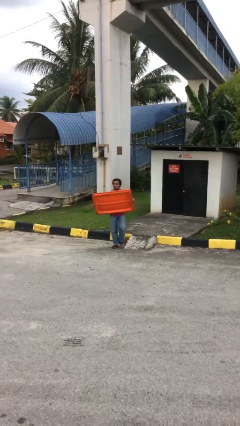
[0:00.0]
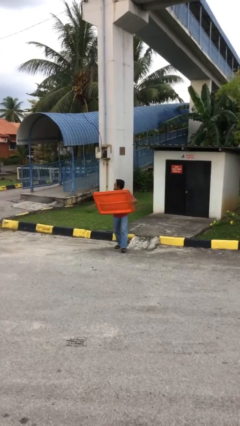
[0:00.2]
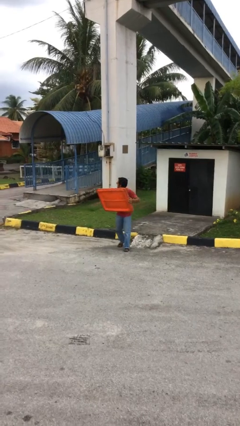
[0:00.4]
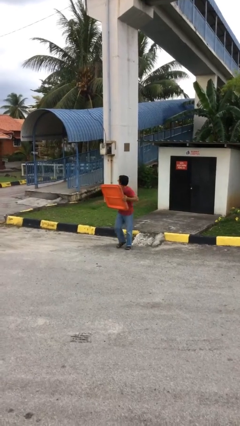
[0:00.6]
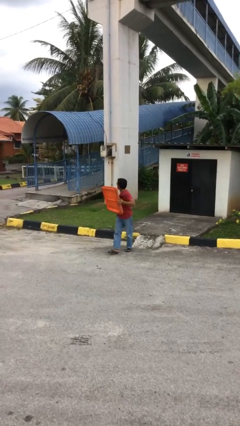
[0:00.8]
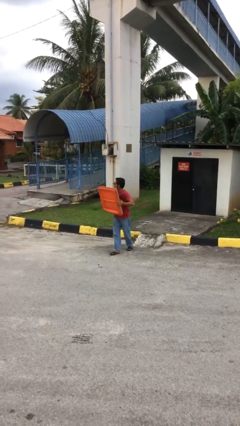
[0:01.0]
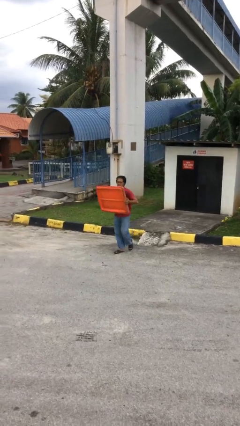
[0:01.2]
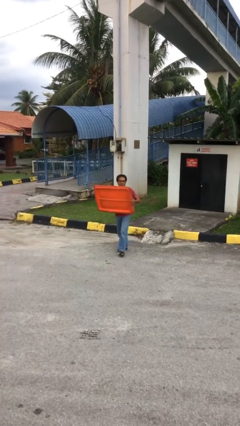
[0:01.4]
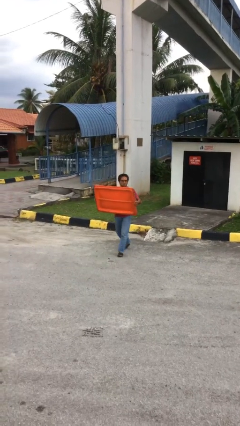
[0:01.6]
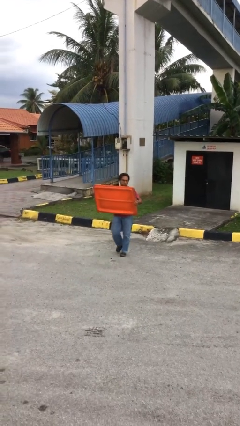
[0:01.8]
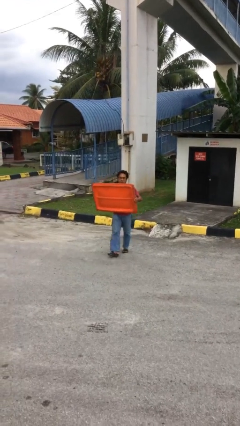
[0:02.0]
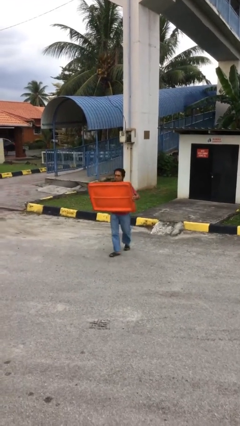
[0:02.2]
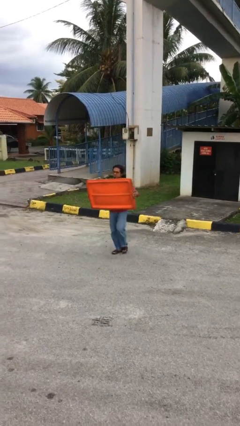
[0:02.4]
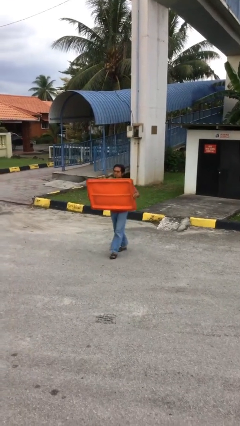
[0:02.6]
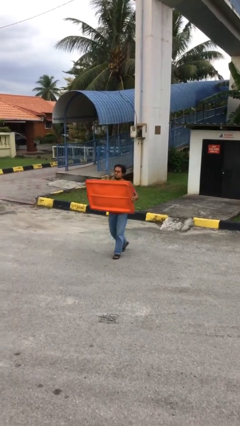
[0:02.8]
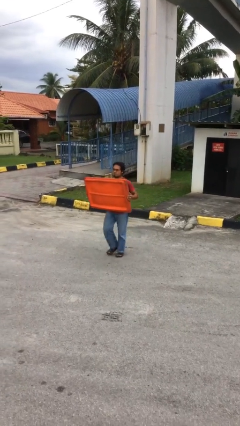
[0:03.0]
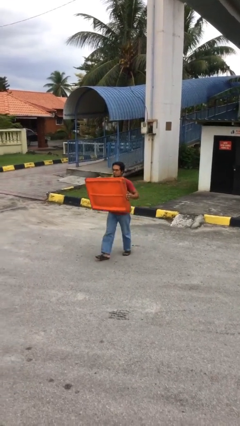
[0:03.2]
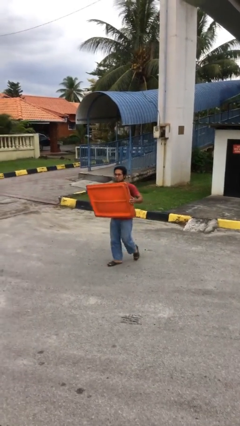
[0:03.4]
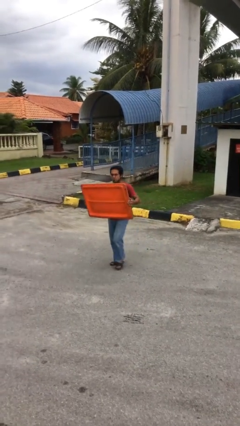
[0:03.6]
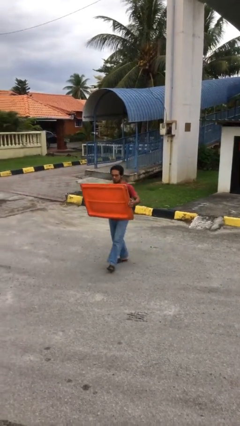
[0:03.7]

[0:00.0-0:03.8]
person carries heavy object

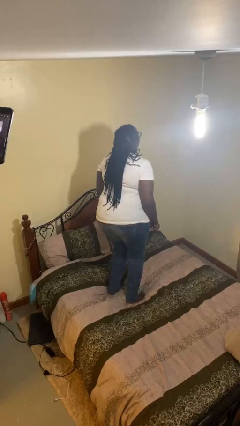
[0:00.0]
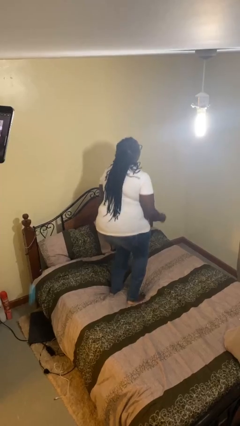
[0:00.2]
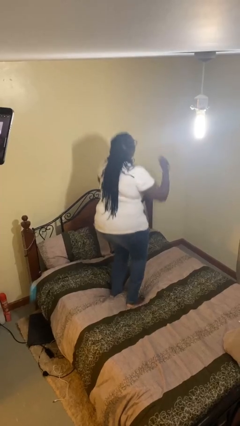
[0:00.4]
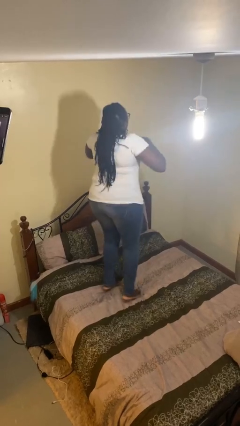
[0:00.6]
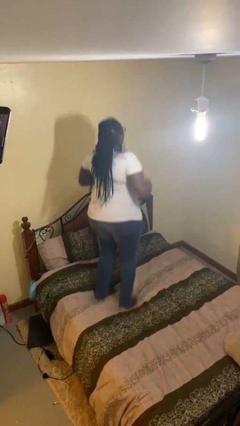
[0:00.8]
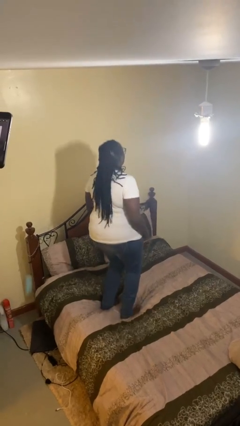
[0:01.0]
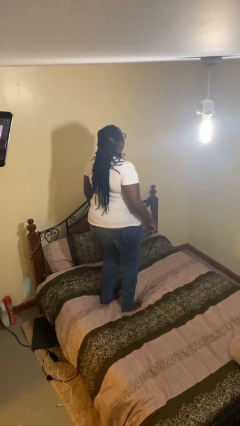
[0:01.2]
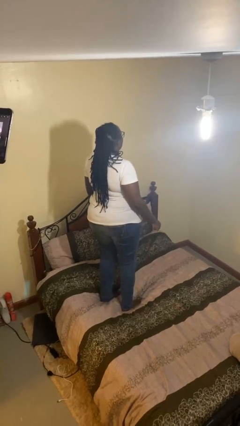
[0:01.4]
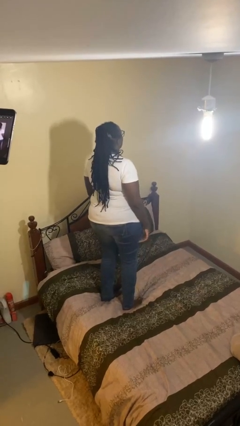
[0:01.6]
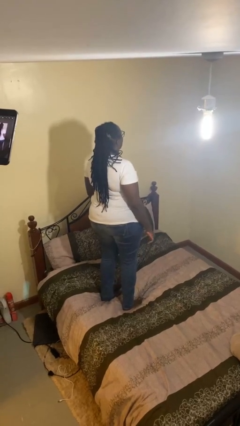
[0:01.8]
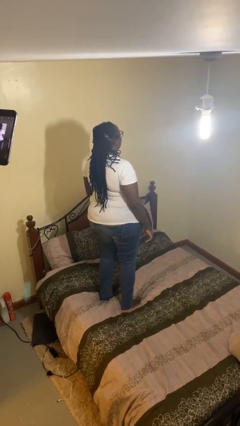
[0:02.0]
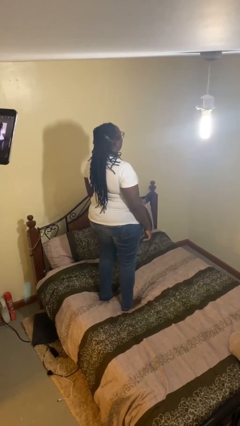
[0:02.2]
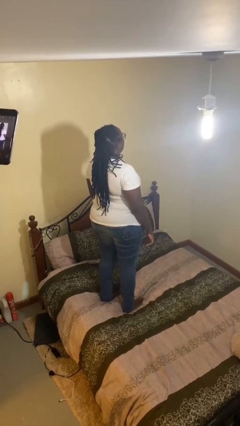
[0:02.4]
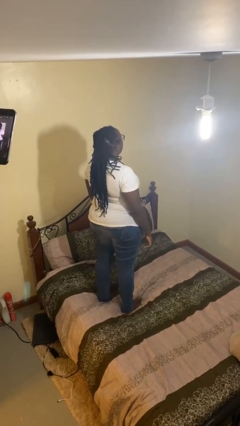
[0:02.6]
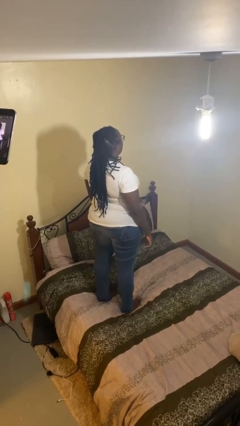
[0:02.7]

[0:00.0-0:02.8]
person jumps on bed

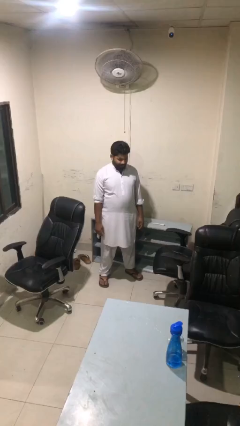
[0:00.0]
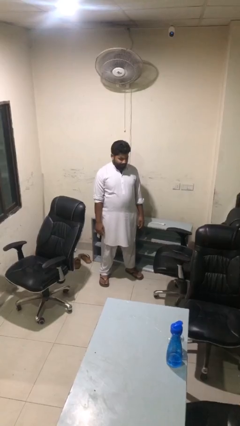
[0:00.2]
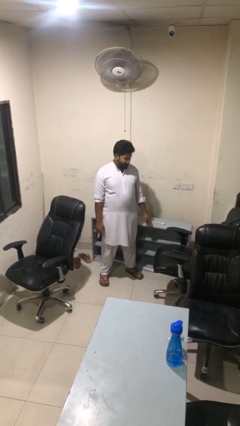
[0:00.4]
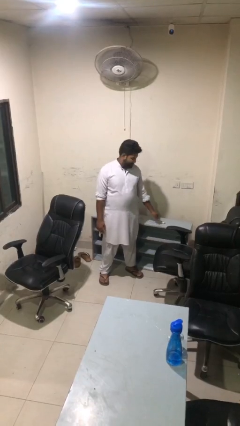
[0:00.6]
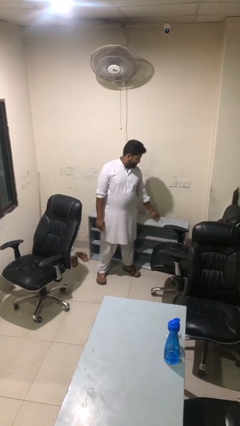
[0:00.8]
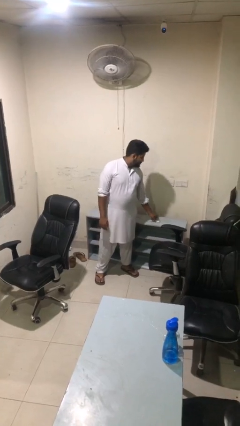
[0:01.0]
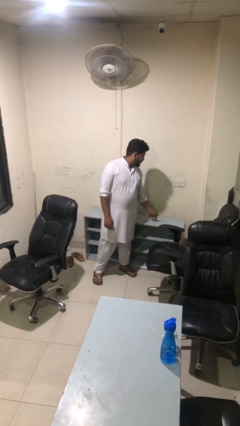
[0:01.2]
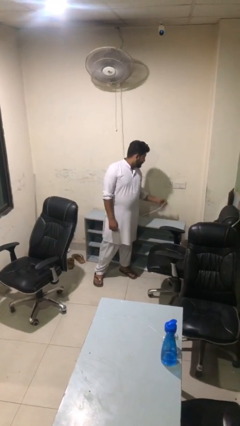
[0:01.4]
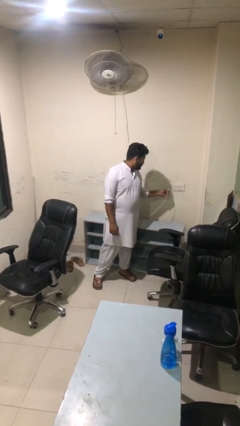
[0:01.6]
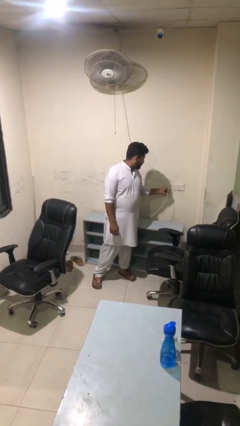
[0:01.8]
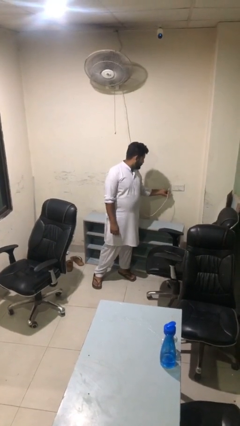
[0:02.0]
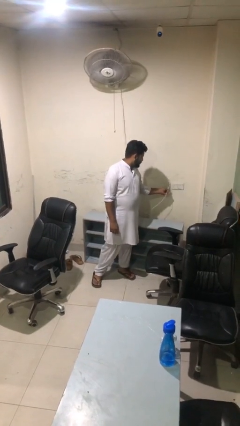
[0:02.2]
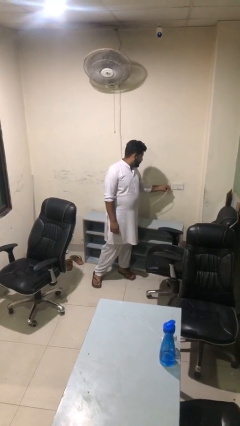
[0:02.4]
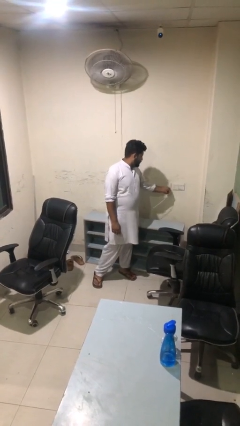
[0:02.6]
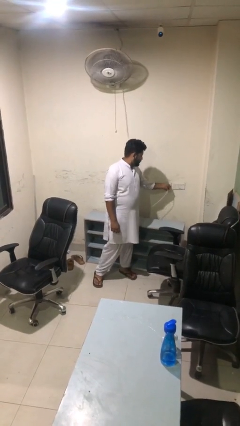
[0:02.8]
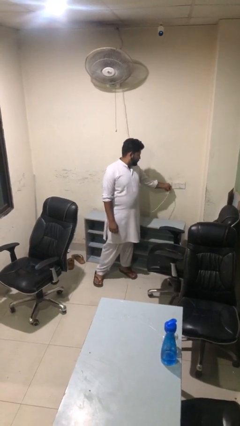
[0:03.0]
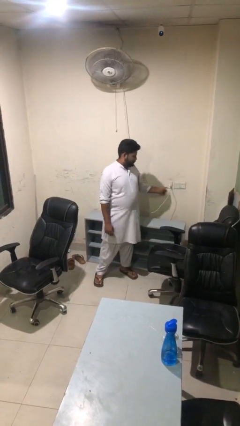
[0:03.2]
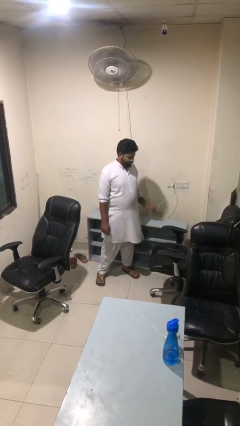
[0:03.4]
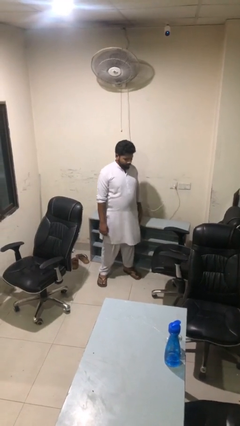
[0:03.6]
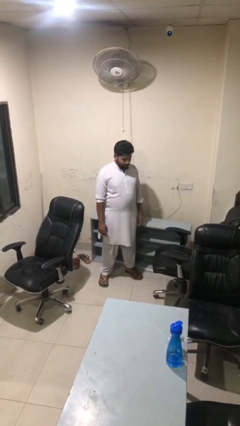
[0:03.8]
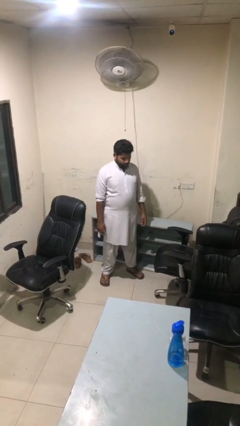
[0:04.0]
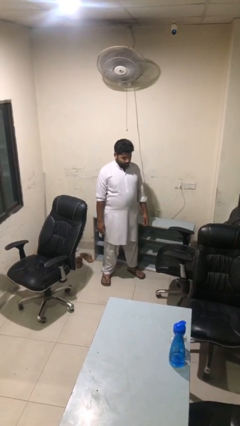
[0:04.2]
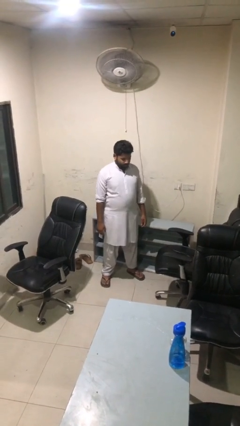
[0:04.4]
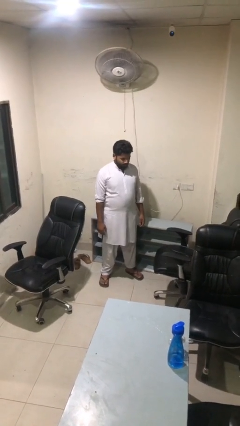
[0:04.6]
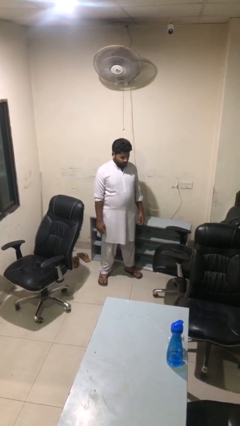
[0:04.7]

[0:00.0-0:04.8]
person plugs into electrical socket

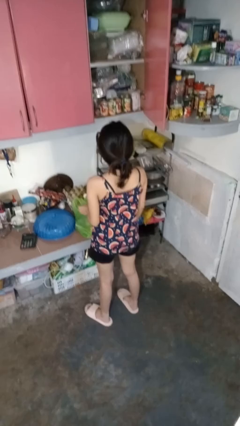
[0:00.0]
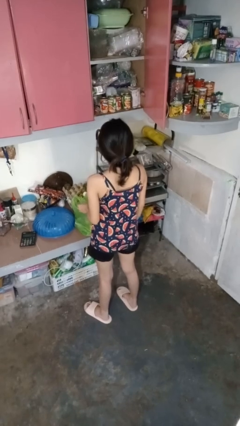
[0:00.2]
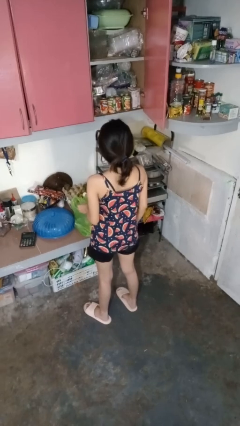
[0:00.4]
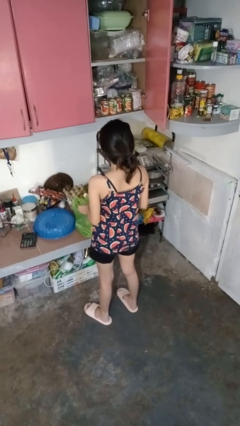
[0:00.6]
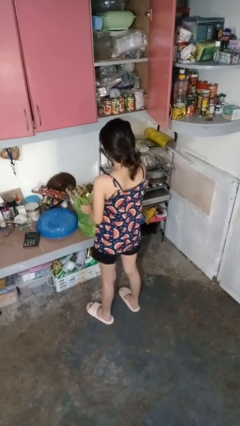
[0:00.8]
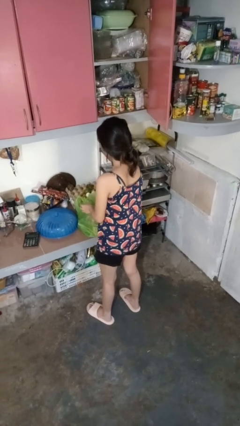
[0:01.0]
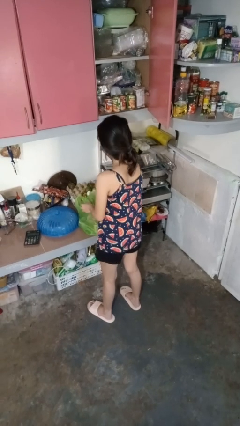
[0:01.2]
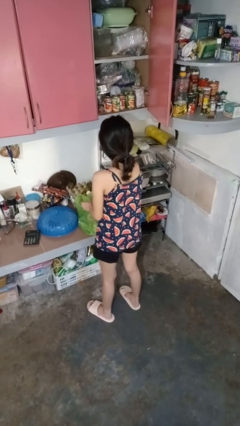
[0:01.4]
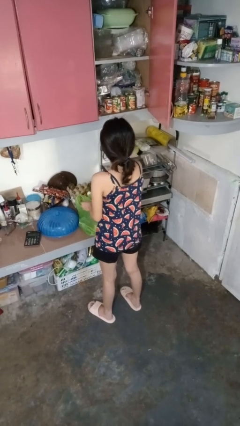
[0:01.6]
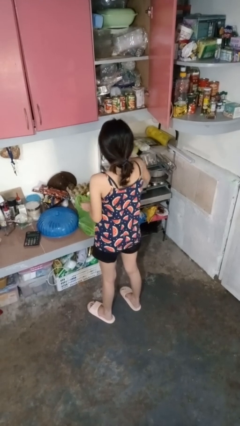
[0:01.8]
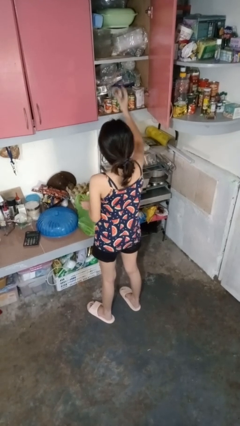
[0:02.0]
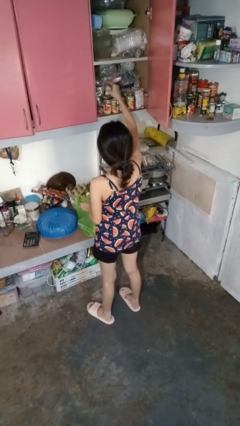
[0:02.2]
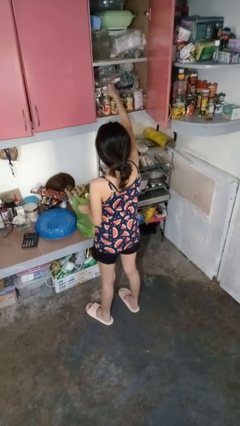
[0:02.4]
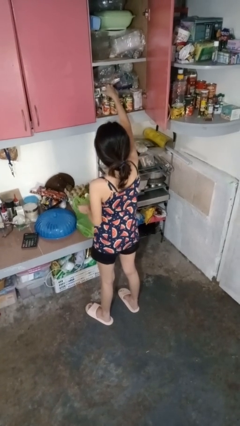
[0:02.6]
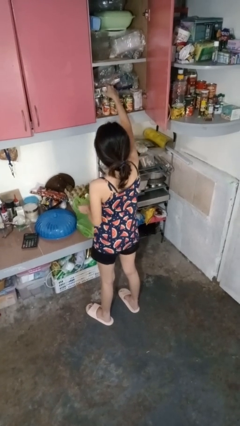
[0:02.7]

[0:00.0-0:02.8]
person loads groceries into cabinet

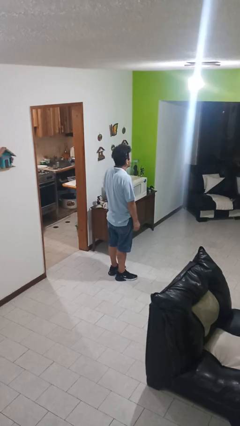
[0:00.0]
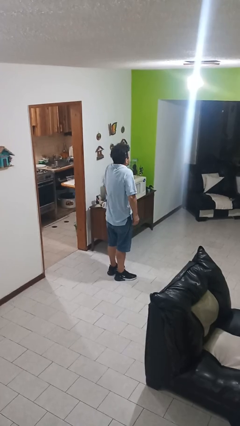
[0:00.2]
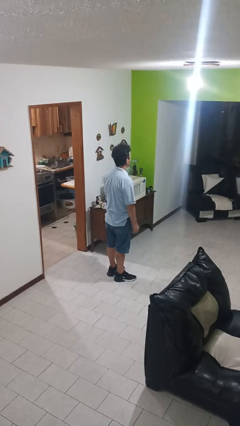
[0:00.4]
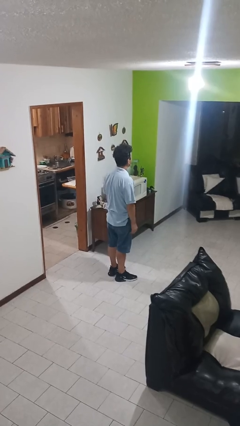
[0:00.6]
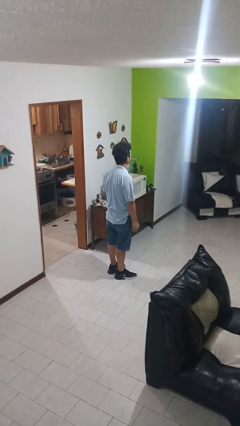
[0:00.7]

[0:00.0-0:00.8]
person shrugs

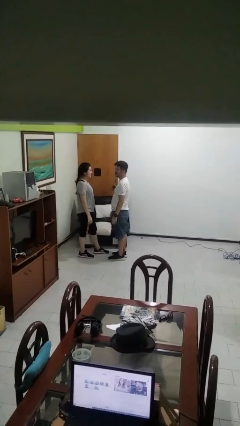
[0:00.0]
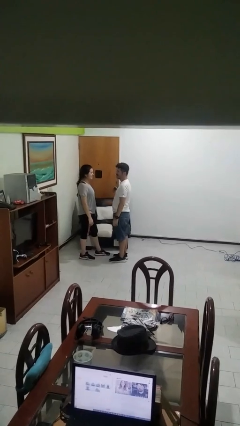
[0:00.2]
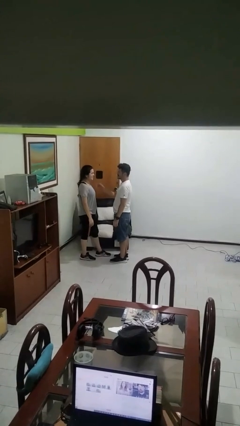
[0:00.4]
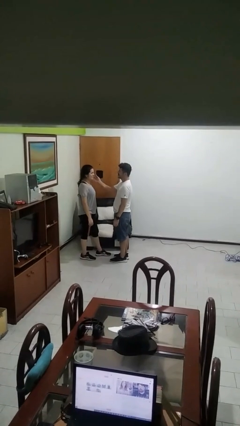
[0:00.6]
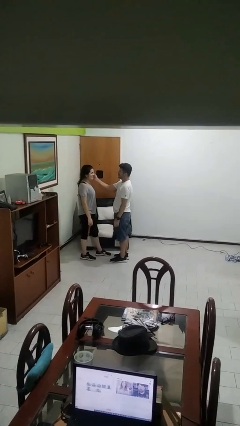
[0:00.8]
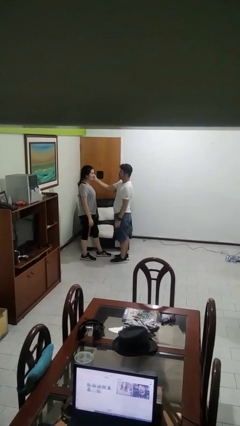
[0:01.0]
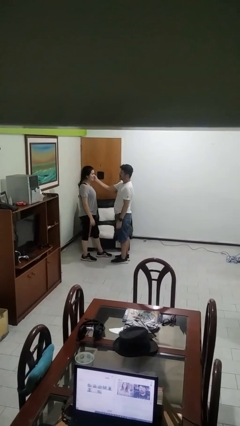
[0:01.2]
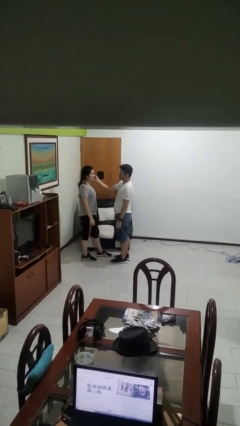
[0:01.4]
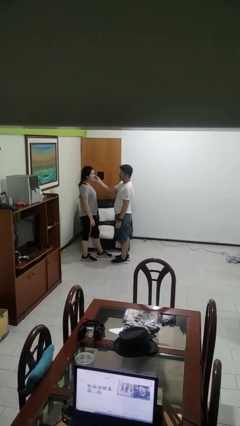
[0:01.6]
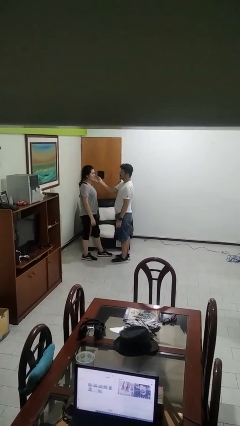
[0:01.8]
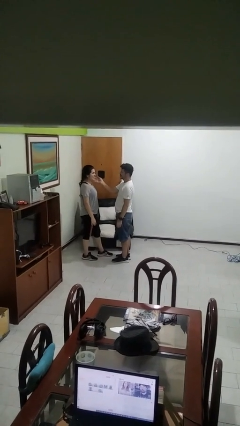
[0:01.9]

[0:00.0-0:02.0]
person touches face of person

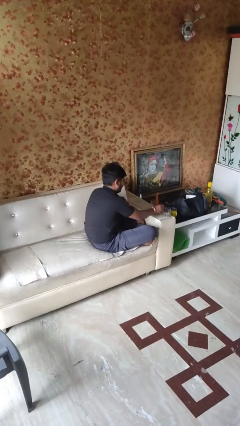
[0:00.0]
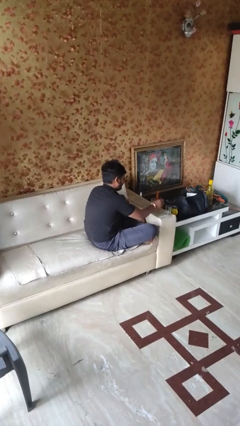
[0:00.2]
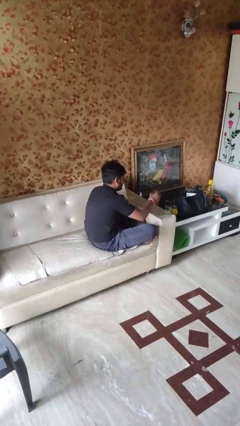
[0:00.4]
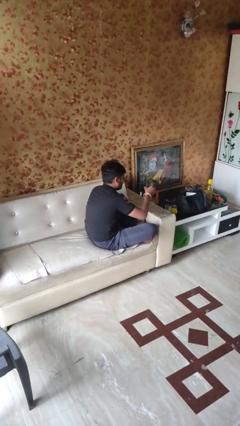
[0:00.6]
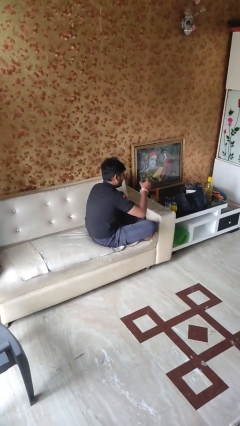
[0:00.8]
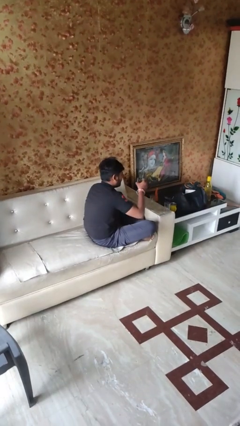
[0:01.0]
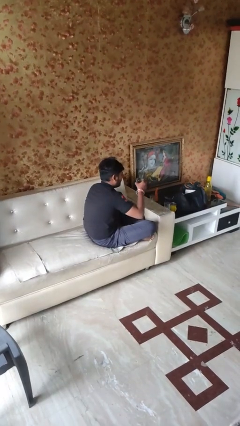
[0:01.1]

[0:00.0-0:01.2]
person picks up object from table
